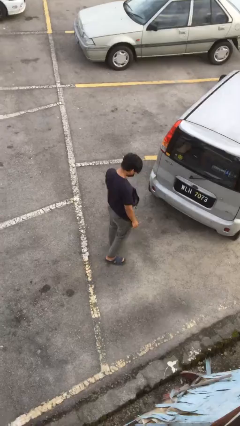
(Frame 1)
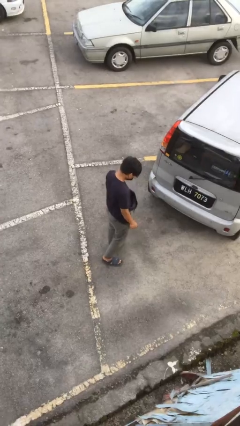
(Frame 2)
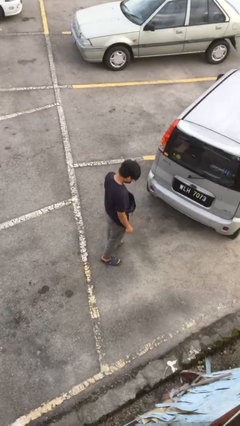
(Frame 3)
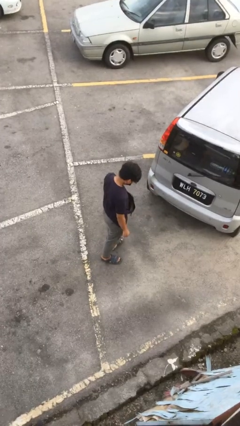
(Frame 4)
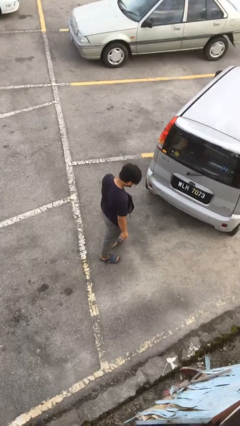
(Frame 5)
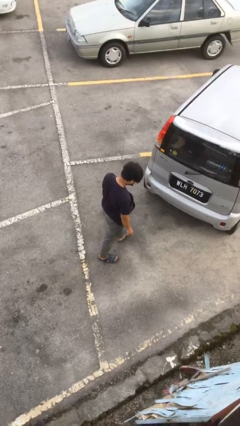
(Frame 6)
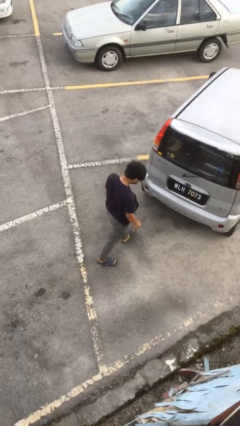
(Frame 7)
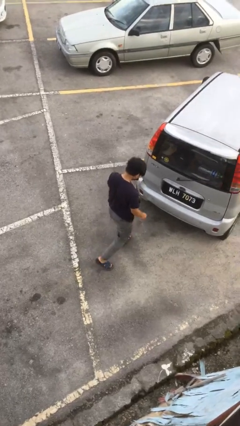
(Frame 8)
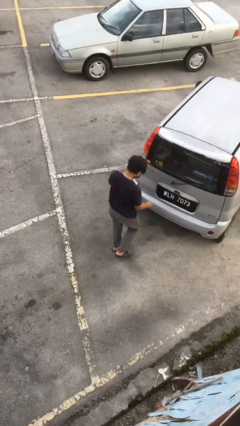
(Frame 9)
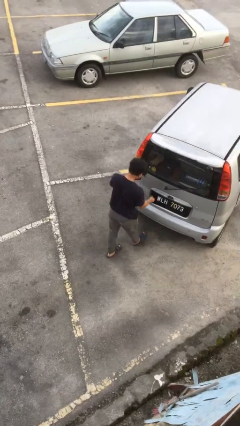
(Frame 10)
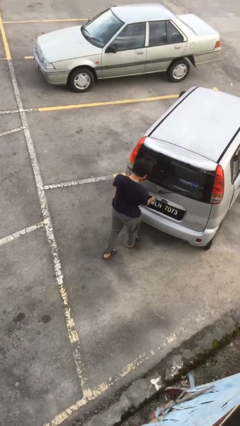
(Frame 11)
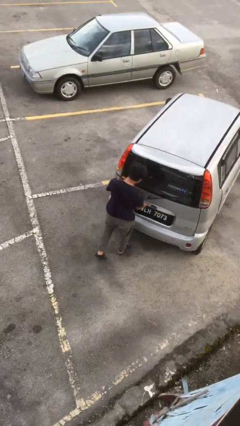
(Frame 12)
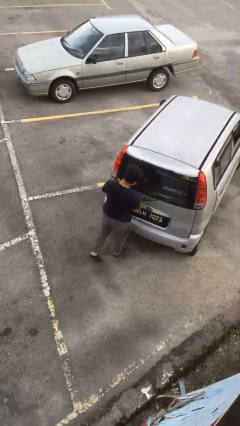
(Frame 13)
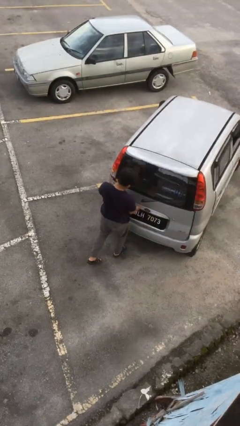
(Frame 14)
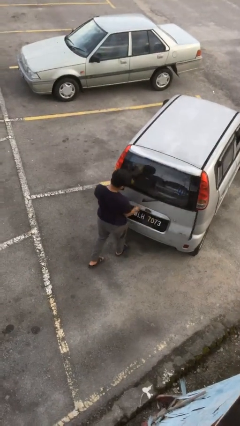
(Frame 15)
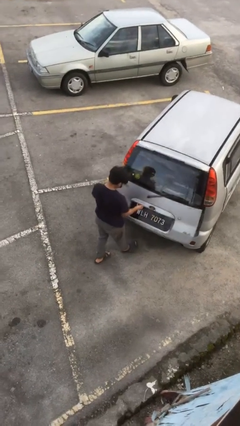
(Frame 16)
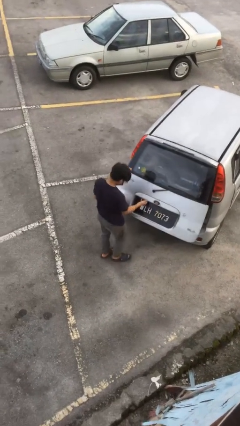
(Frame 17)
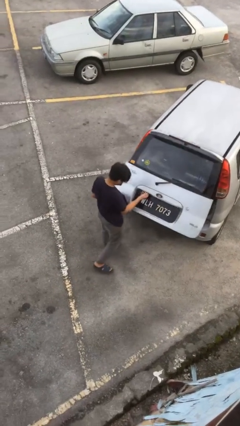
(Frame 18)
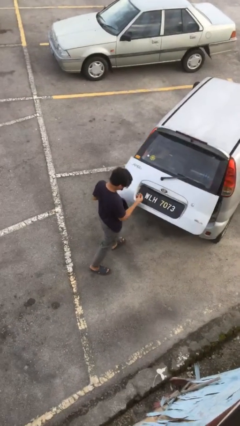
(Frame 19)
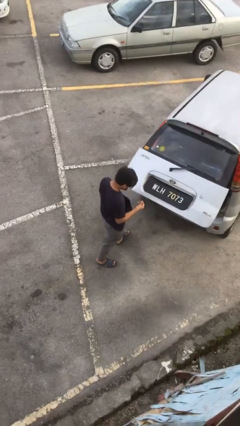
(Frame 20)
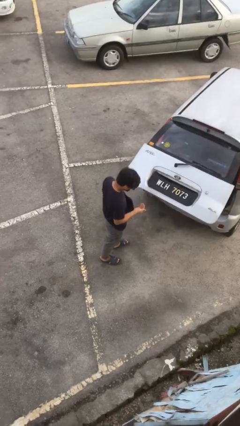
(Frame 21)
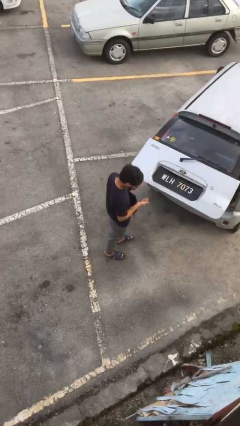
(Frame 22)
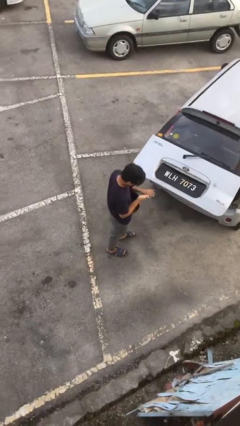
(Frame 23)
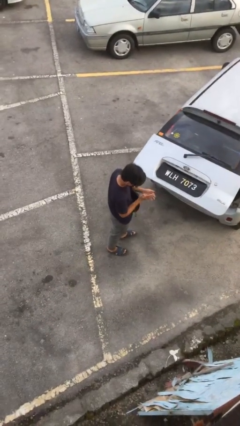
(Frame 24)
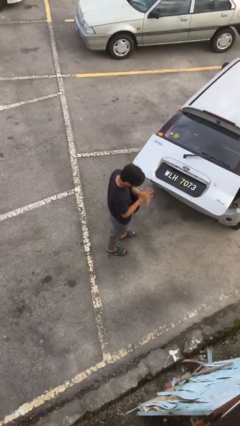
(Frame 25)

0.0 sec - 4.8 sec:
person opens car trunk

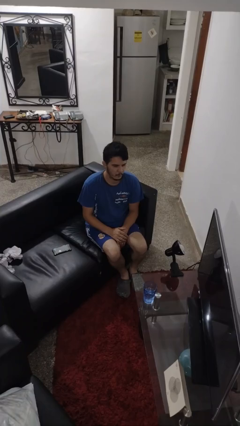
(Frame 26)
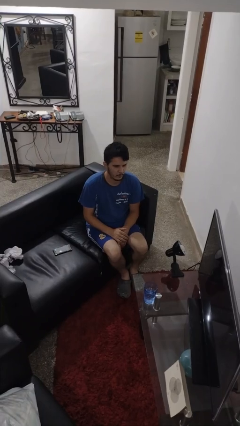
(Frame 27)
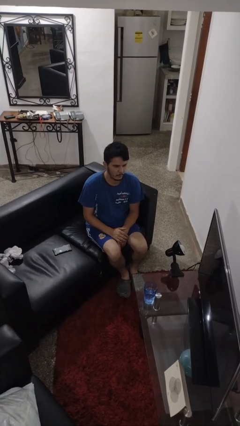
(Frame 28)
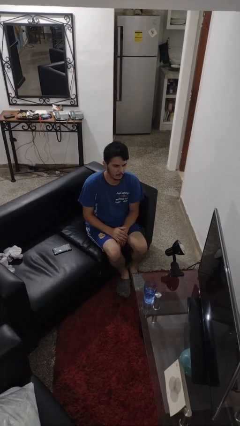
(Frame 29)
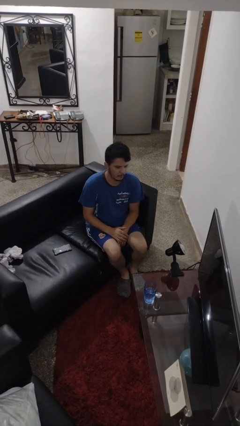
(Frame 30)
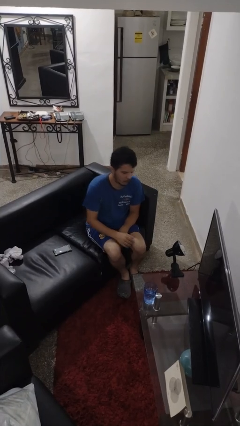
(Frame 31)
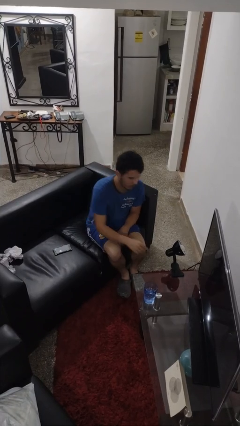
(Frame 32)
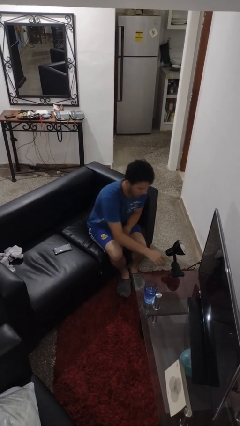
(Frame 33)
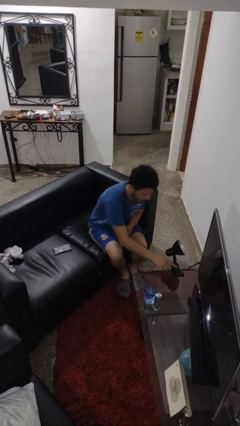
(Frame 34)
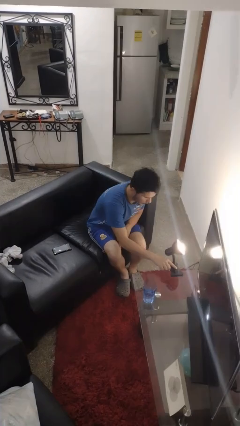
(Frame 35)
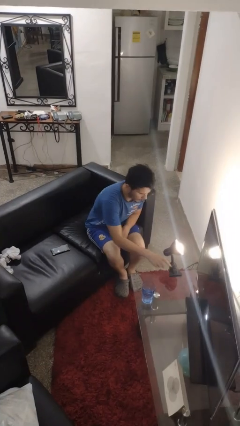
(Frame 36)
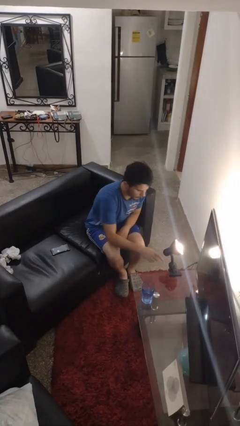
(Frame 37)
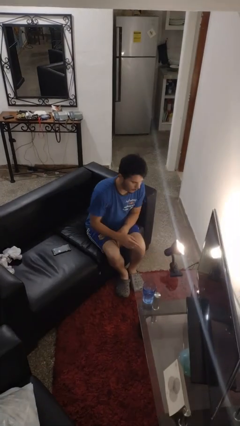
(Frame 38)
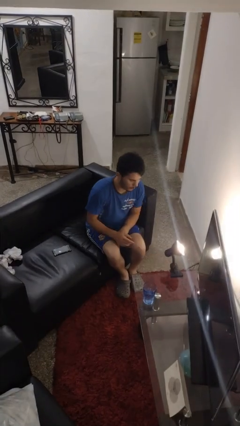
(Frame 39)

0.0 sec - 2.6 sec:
person turns on lamp

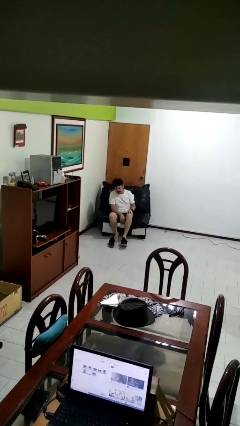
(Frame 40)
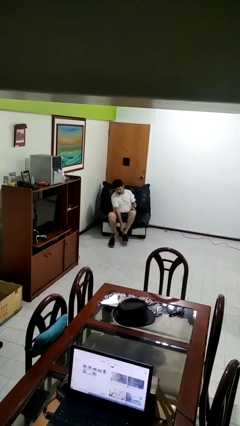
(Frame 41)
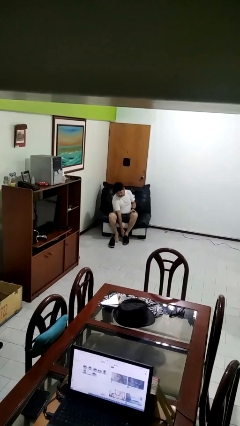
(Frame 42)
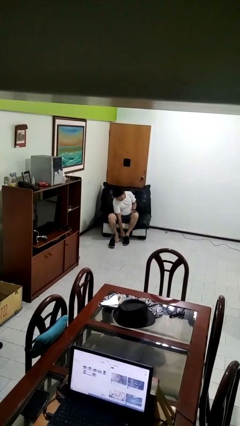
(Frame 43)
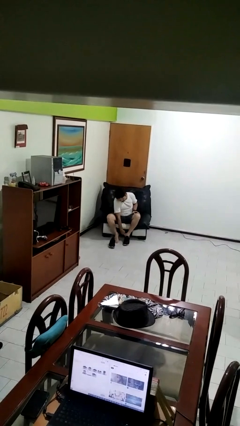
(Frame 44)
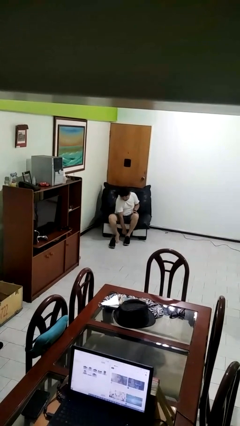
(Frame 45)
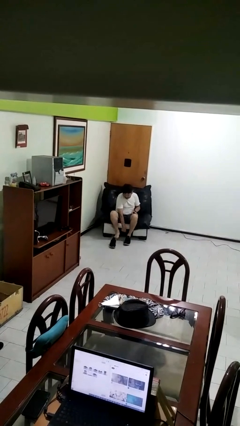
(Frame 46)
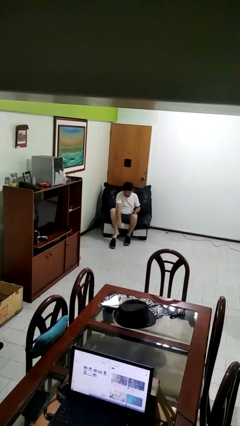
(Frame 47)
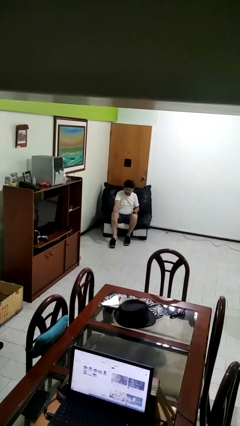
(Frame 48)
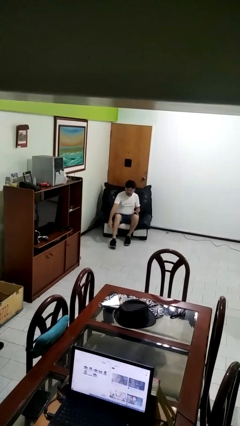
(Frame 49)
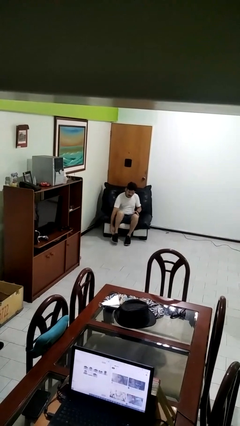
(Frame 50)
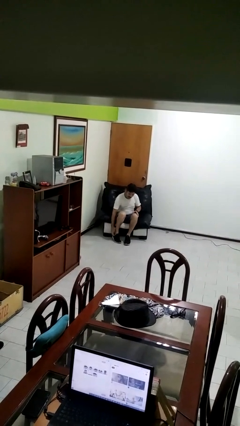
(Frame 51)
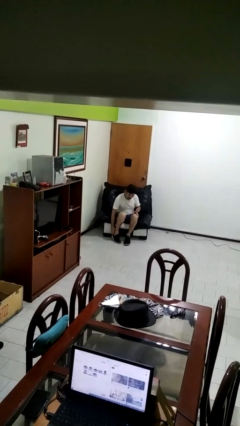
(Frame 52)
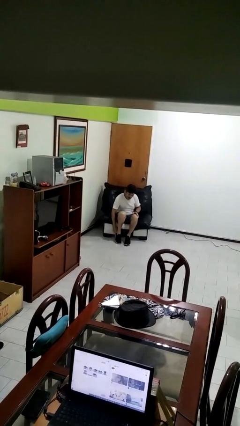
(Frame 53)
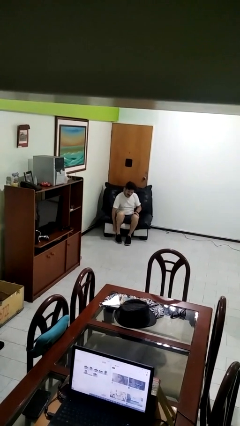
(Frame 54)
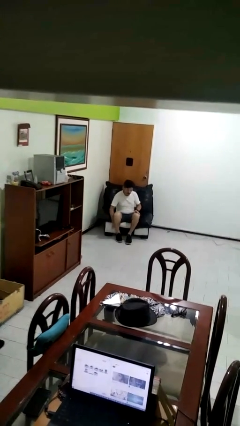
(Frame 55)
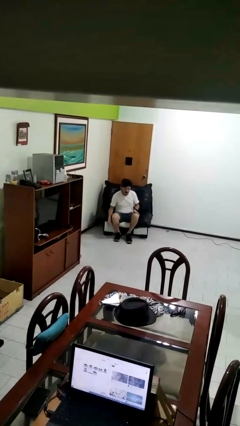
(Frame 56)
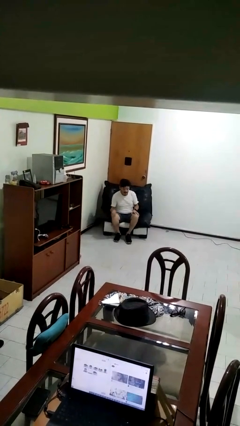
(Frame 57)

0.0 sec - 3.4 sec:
person puts on shoes

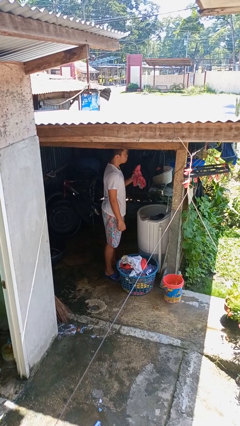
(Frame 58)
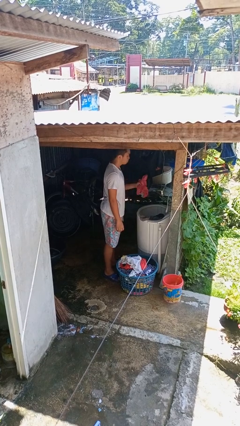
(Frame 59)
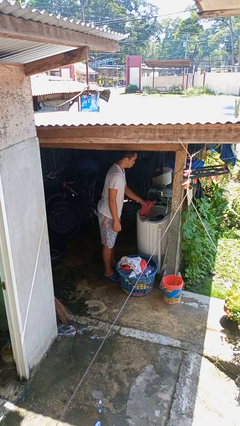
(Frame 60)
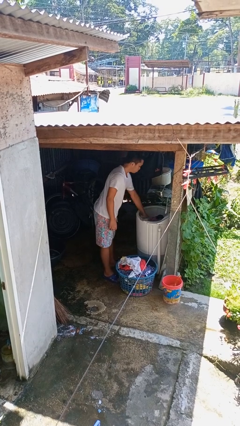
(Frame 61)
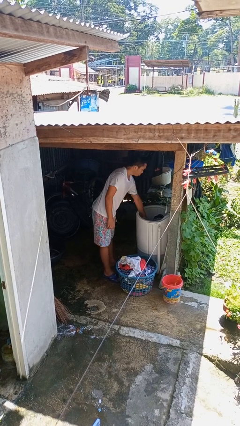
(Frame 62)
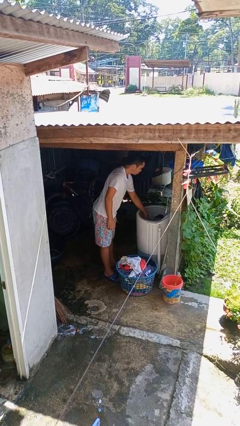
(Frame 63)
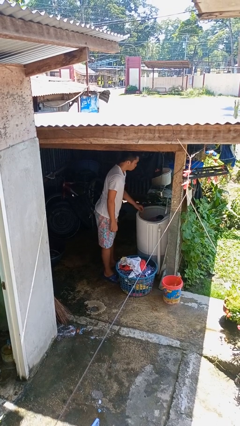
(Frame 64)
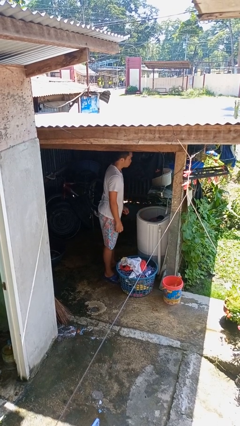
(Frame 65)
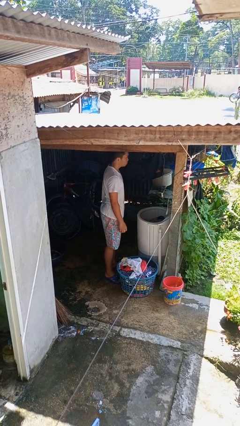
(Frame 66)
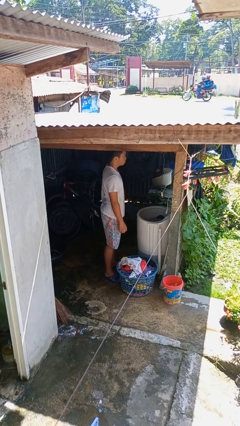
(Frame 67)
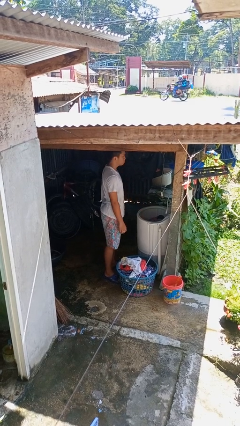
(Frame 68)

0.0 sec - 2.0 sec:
person loads clotheswasher

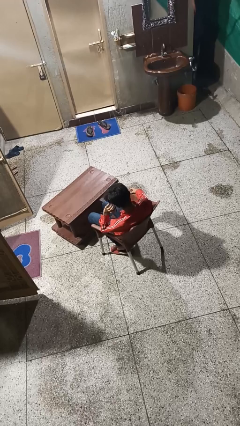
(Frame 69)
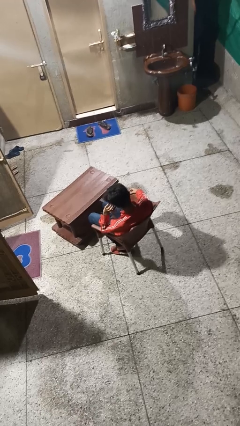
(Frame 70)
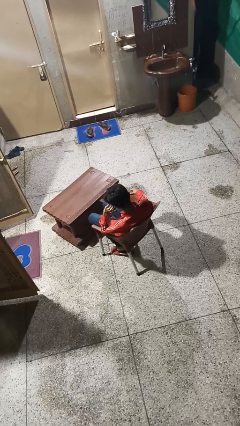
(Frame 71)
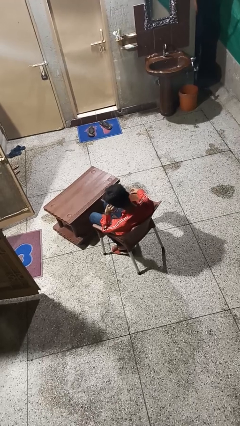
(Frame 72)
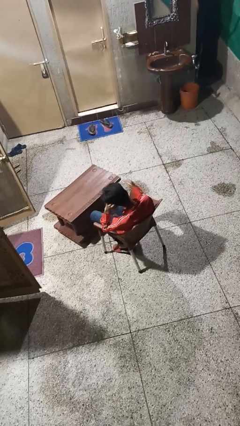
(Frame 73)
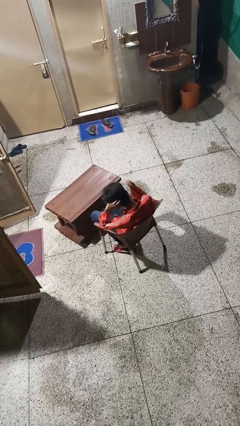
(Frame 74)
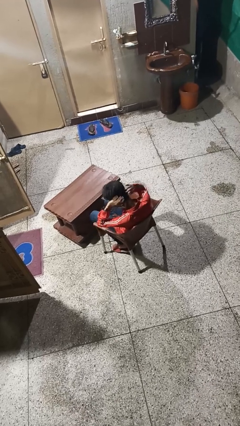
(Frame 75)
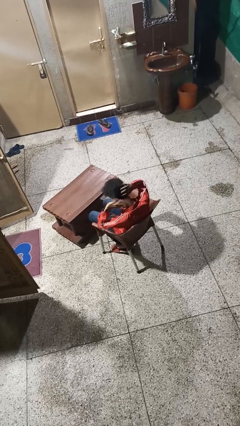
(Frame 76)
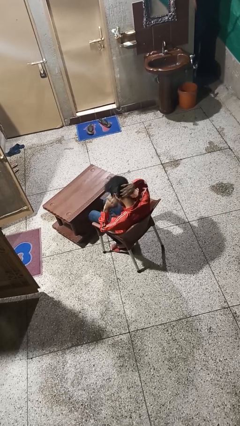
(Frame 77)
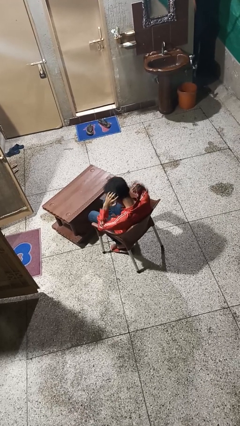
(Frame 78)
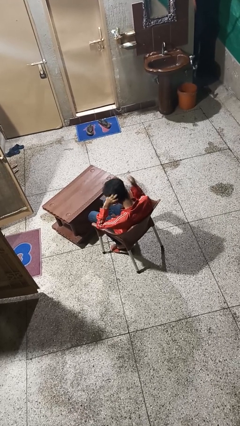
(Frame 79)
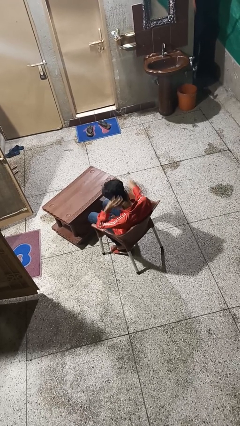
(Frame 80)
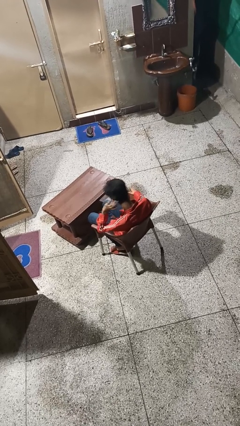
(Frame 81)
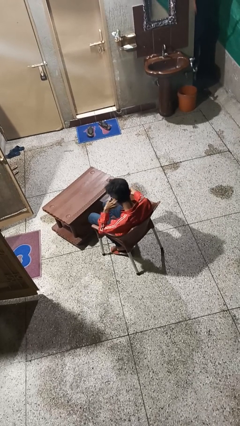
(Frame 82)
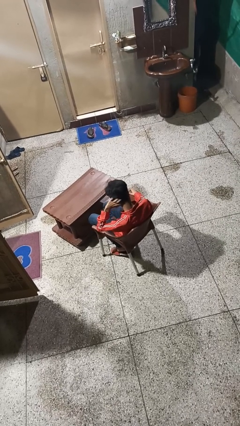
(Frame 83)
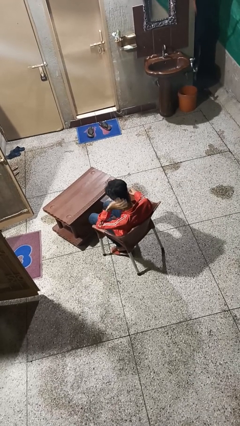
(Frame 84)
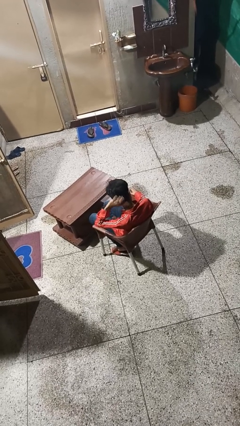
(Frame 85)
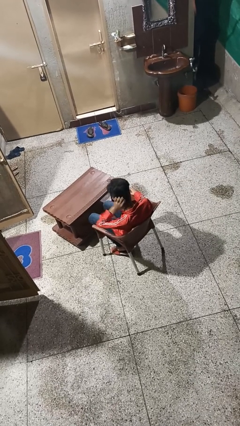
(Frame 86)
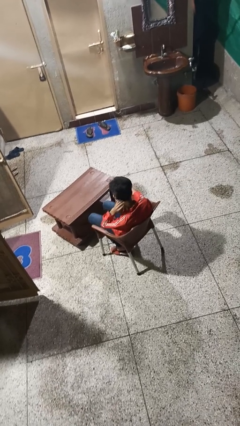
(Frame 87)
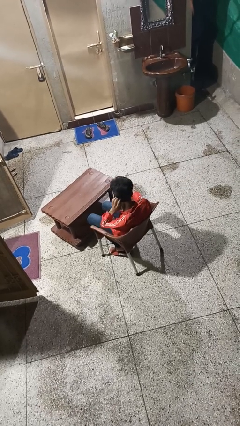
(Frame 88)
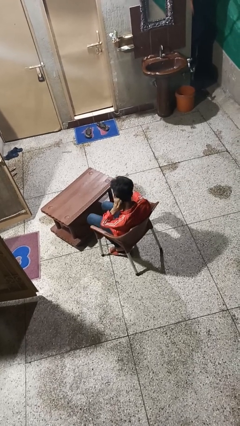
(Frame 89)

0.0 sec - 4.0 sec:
person strokes hair

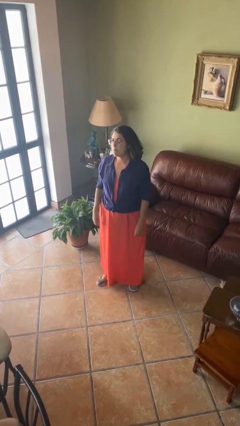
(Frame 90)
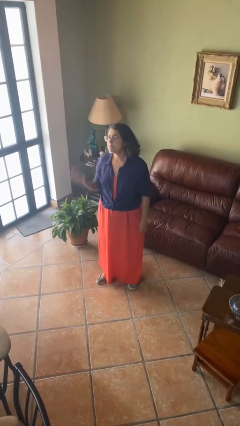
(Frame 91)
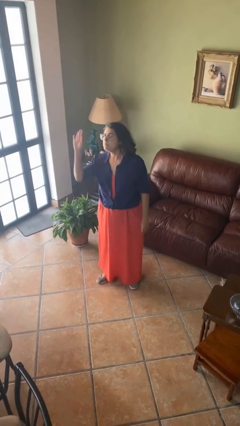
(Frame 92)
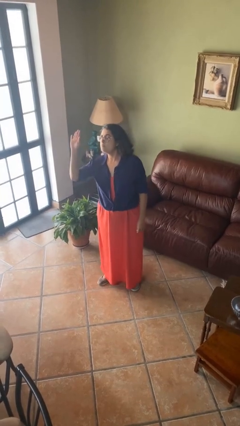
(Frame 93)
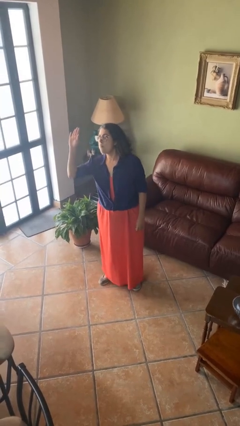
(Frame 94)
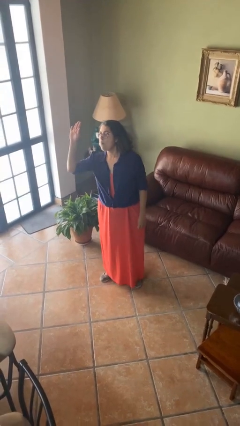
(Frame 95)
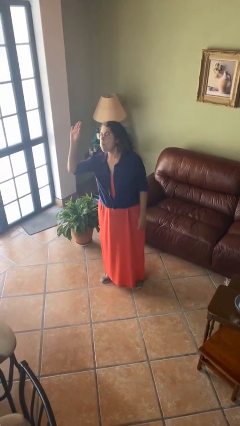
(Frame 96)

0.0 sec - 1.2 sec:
person gestures raise hand
